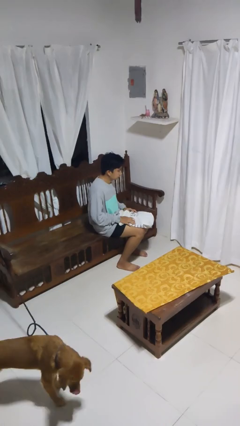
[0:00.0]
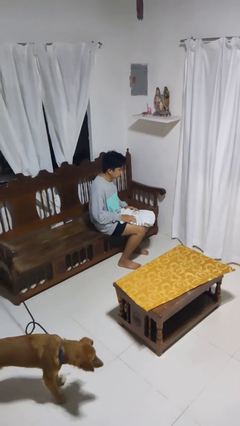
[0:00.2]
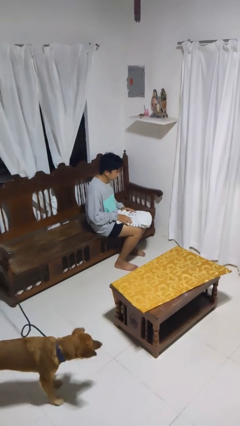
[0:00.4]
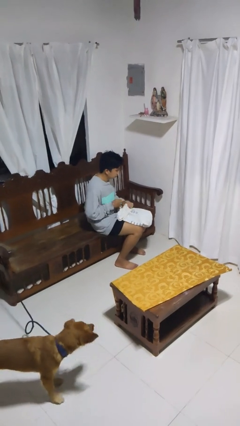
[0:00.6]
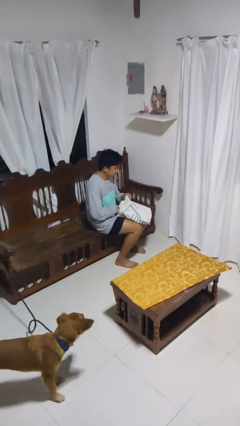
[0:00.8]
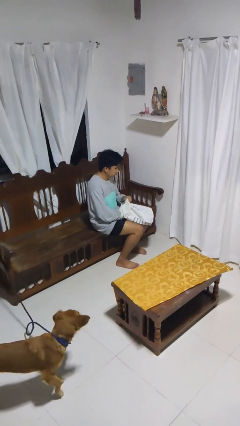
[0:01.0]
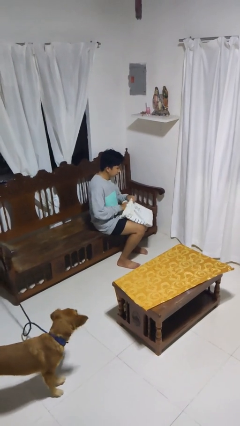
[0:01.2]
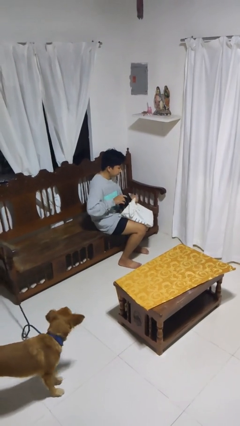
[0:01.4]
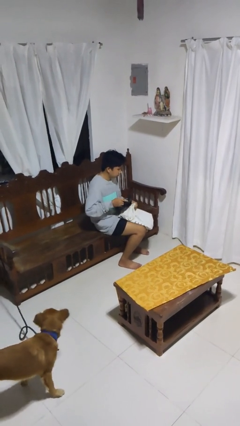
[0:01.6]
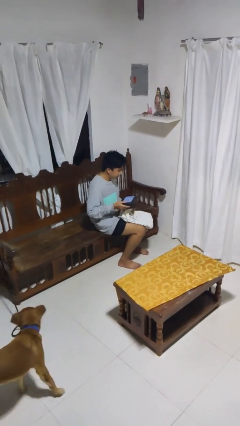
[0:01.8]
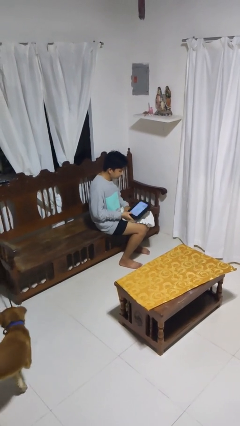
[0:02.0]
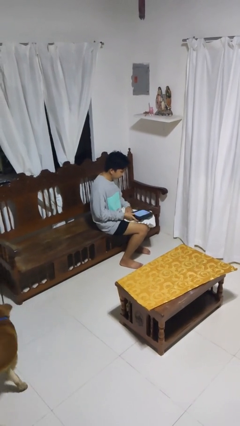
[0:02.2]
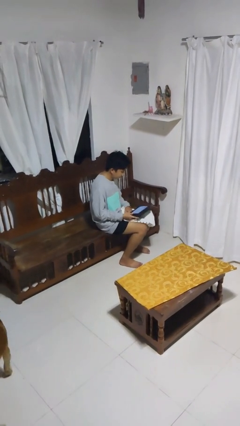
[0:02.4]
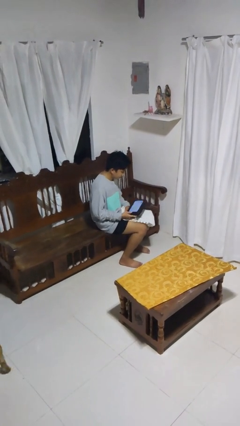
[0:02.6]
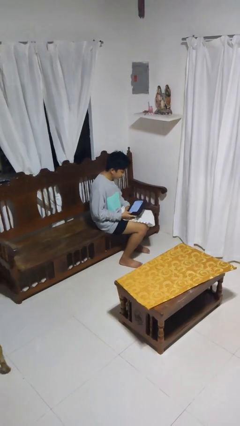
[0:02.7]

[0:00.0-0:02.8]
person takes object from bag

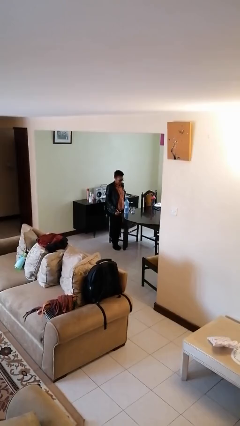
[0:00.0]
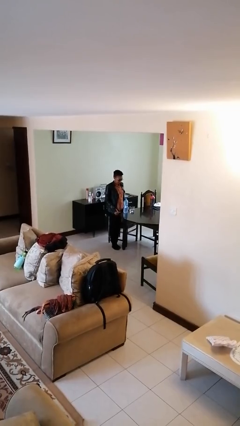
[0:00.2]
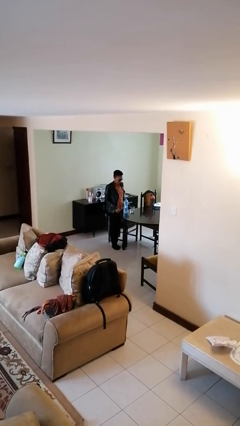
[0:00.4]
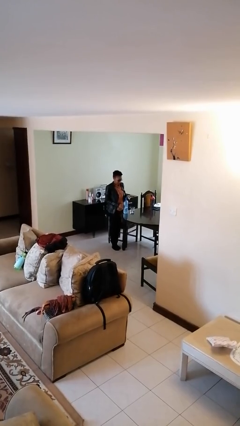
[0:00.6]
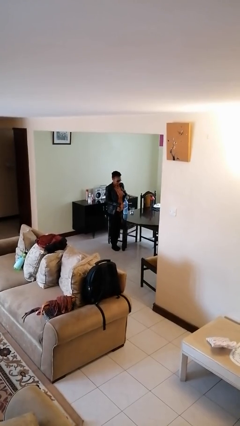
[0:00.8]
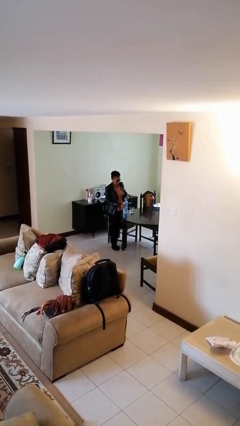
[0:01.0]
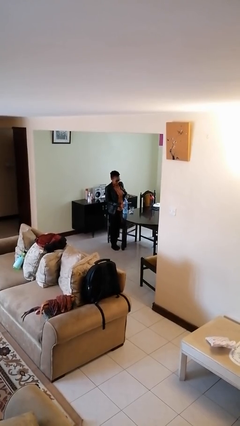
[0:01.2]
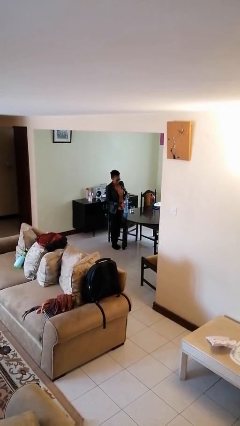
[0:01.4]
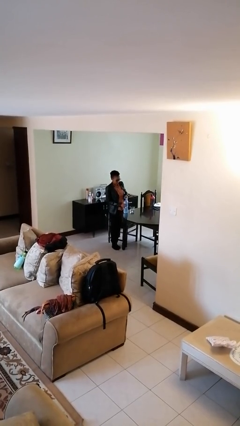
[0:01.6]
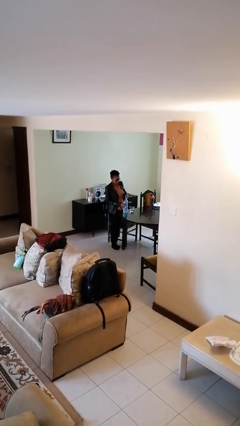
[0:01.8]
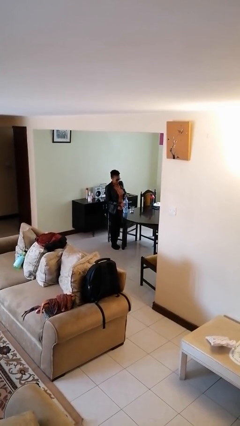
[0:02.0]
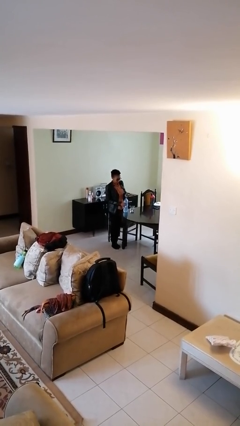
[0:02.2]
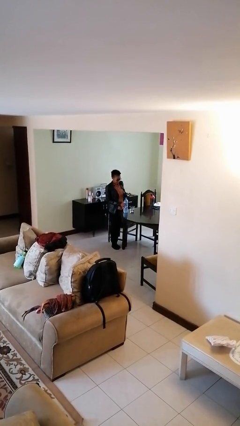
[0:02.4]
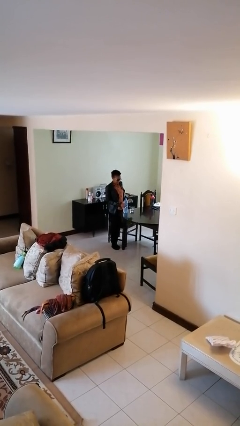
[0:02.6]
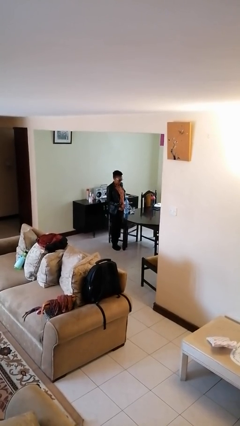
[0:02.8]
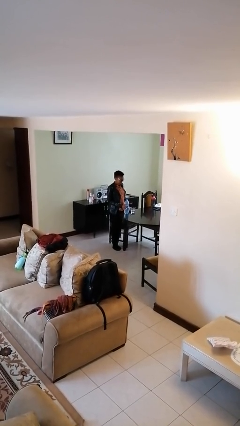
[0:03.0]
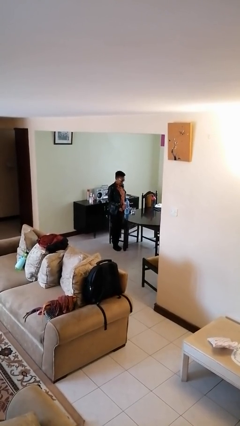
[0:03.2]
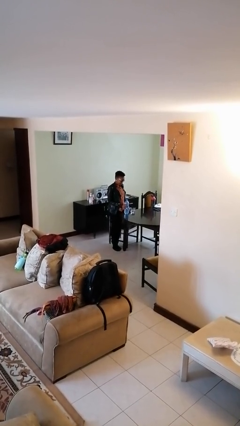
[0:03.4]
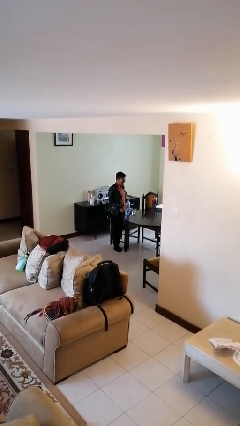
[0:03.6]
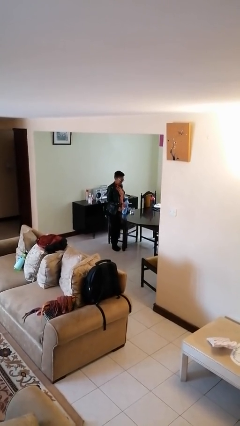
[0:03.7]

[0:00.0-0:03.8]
person unscrews lid from bottle

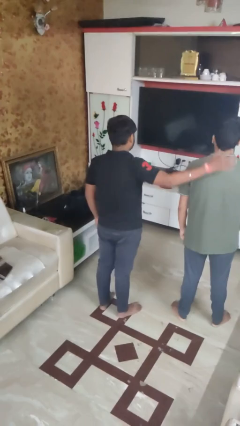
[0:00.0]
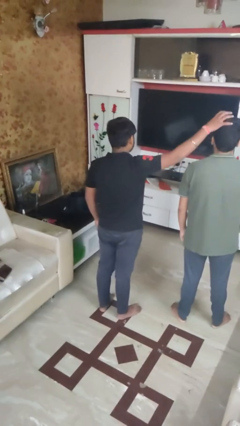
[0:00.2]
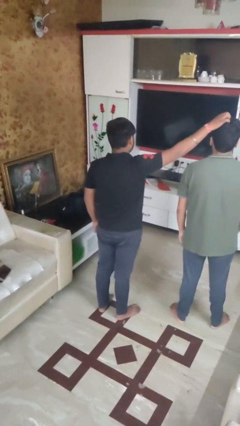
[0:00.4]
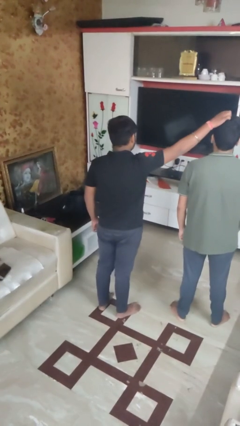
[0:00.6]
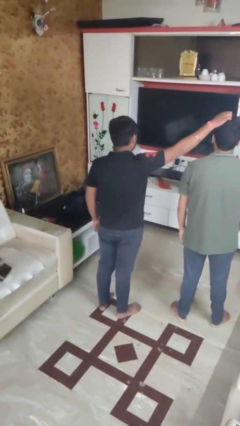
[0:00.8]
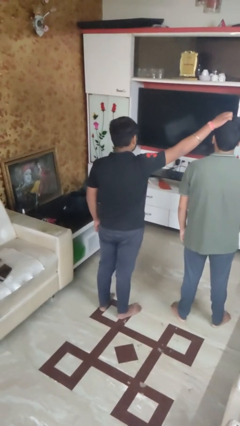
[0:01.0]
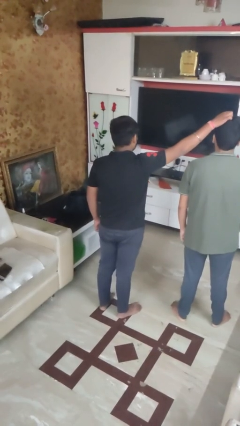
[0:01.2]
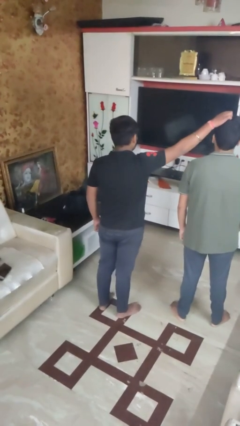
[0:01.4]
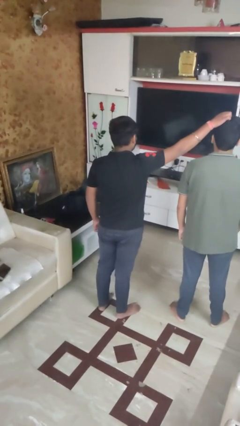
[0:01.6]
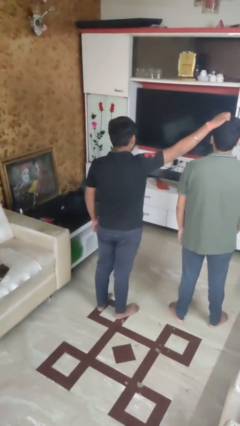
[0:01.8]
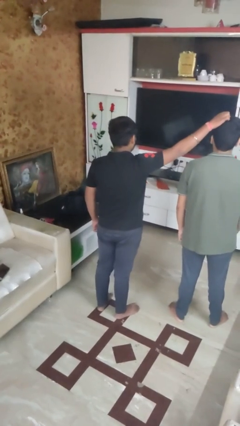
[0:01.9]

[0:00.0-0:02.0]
person grabs person by hair

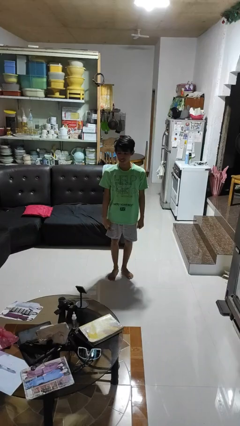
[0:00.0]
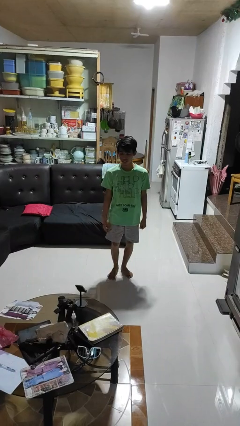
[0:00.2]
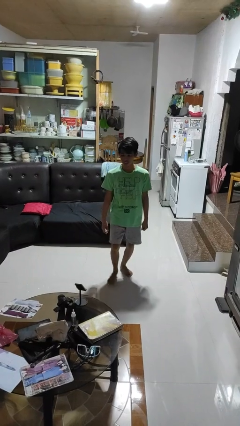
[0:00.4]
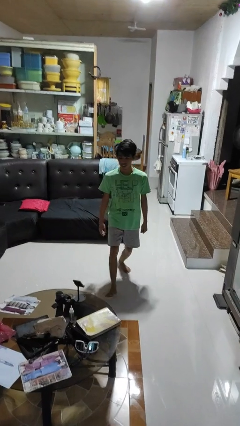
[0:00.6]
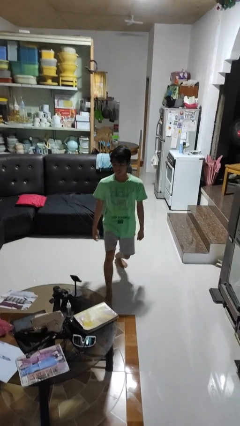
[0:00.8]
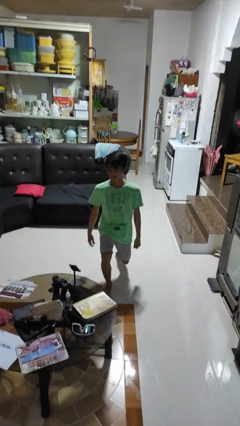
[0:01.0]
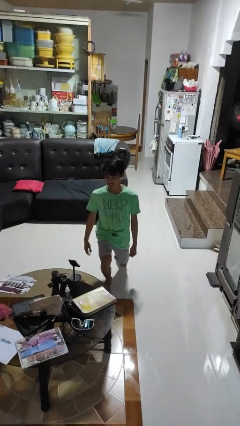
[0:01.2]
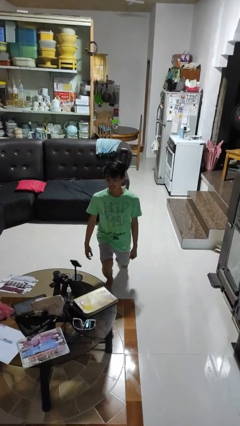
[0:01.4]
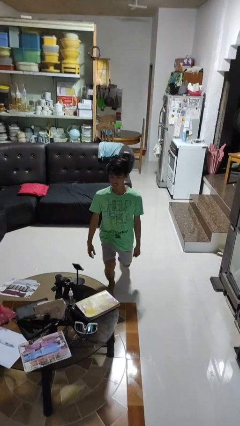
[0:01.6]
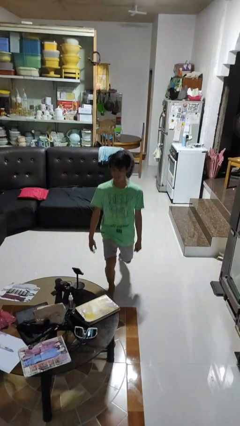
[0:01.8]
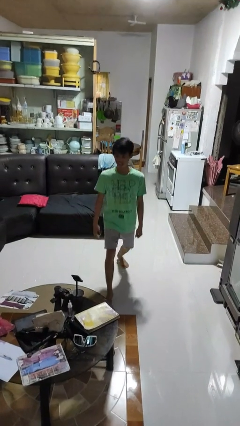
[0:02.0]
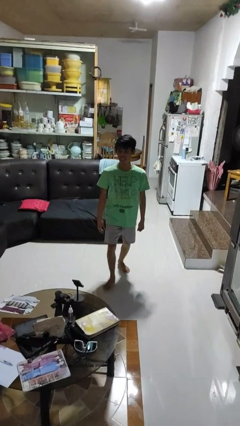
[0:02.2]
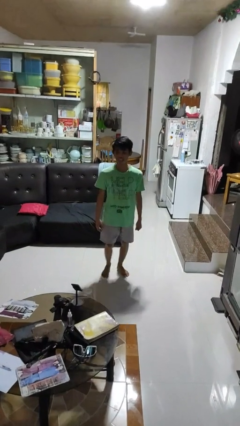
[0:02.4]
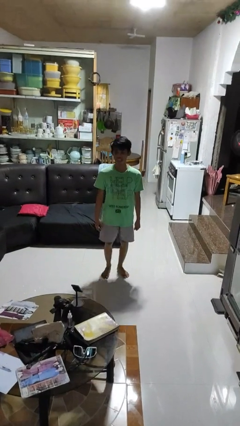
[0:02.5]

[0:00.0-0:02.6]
person exercises with lunges

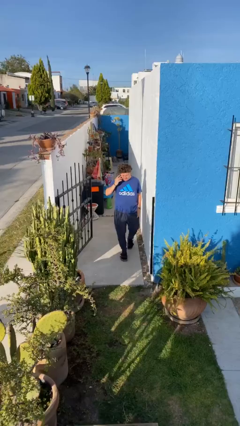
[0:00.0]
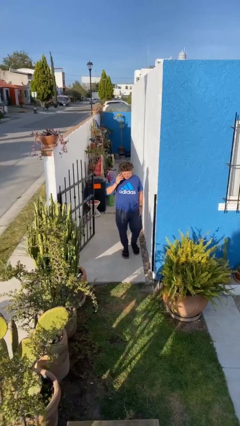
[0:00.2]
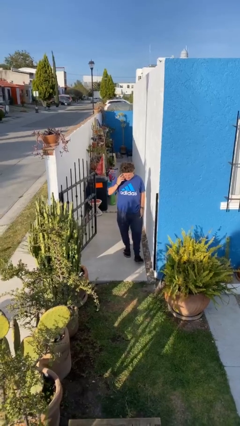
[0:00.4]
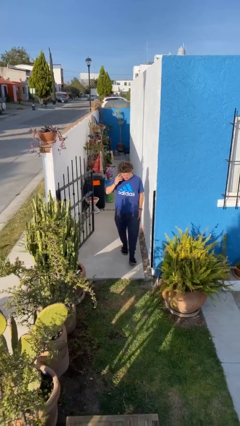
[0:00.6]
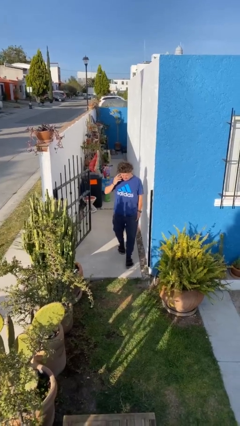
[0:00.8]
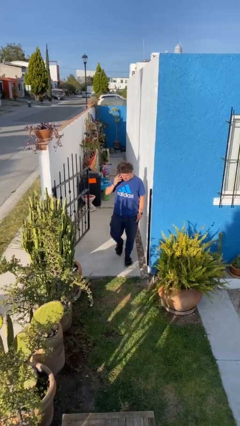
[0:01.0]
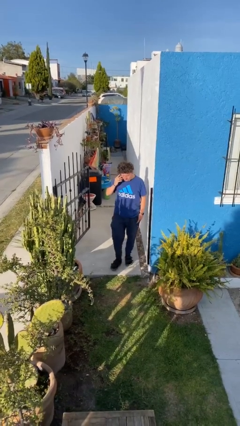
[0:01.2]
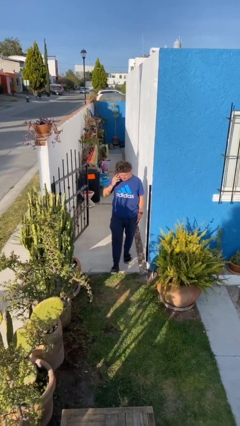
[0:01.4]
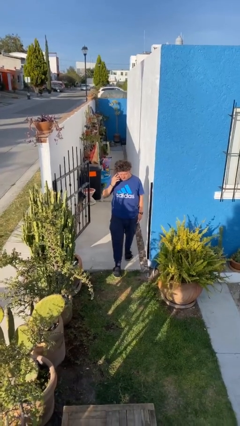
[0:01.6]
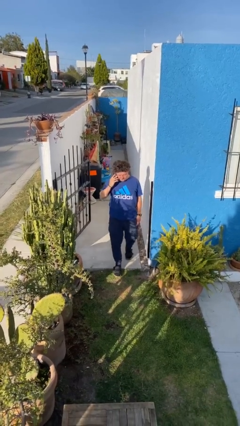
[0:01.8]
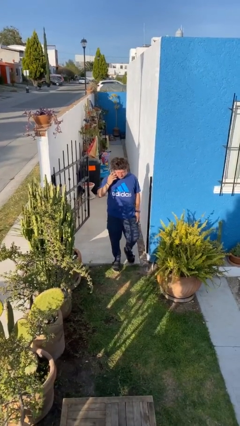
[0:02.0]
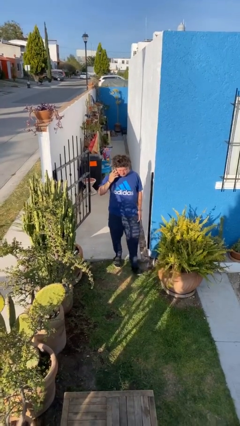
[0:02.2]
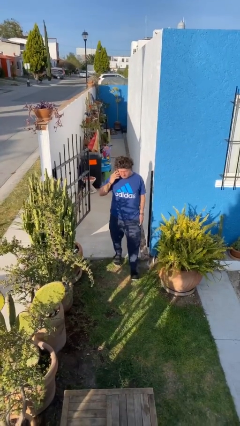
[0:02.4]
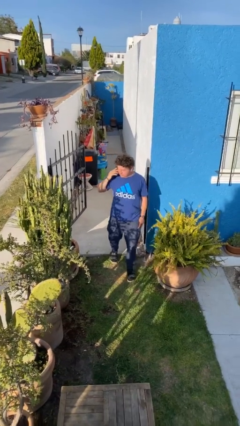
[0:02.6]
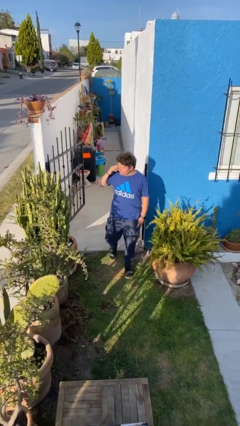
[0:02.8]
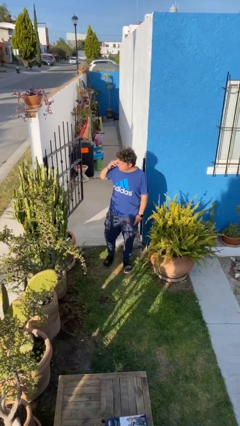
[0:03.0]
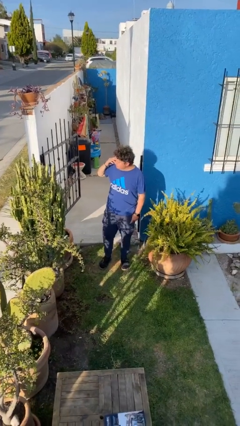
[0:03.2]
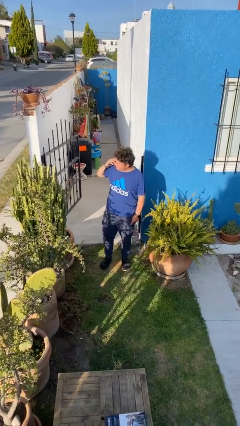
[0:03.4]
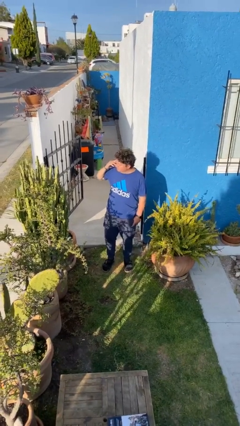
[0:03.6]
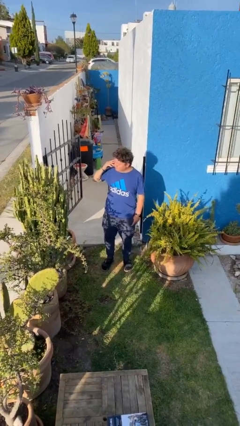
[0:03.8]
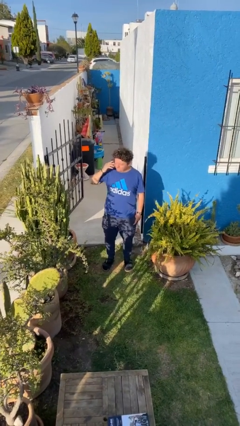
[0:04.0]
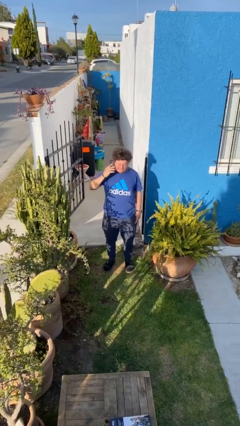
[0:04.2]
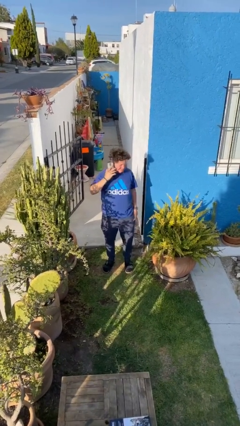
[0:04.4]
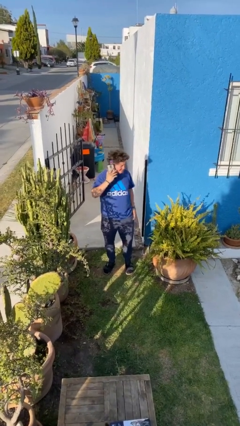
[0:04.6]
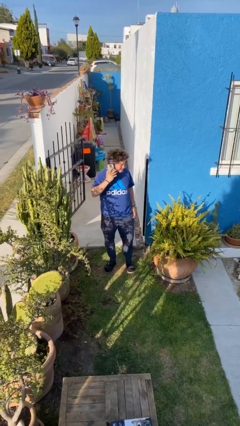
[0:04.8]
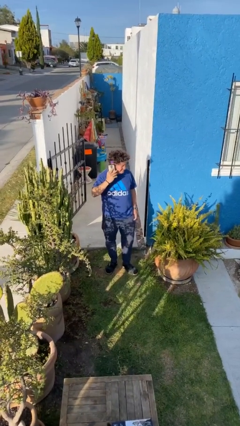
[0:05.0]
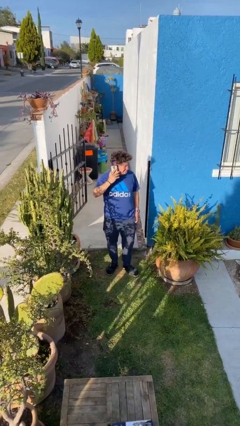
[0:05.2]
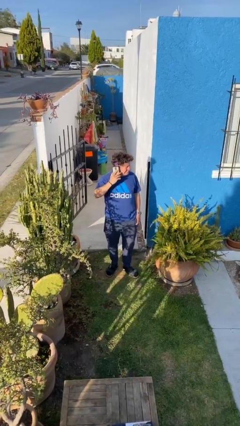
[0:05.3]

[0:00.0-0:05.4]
person enters scene through structure

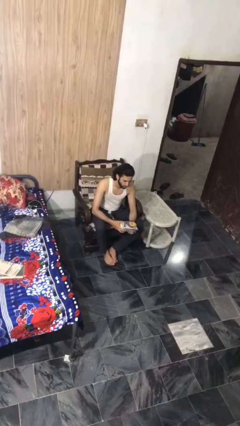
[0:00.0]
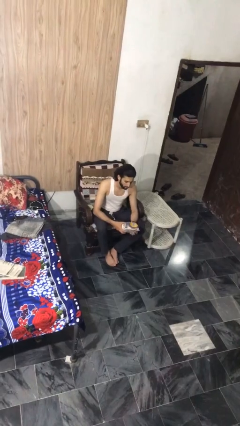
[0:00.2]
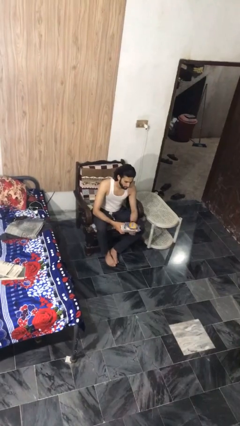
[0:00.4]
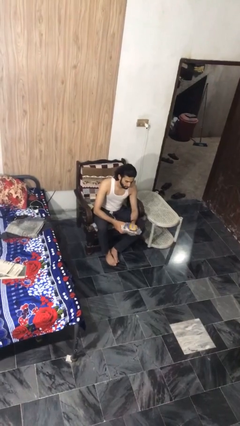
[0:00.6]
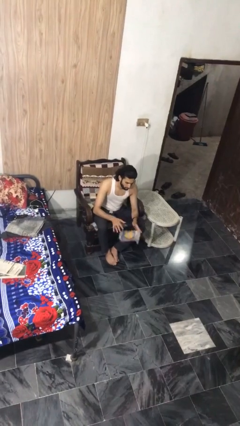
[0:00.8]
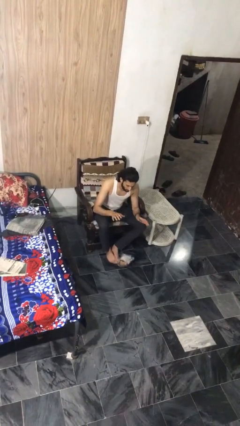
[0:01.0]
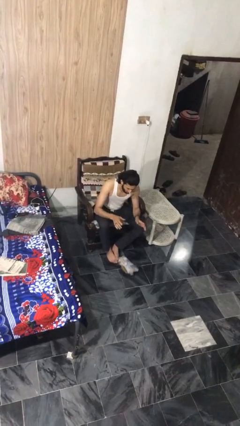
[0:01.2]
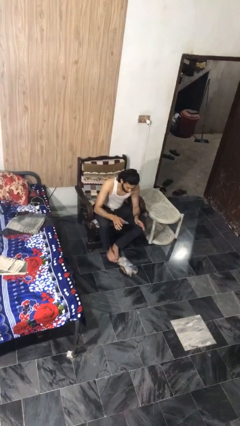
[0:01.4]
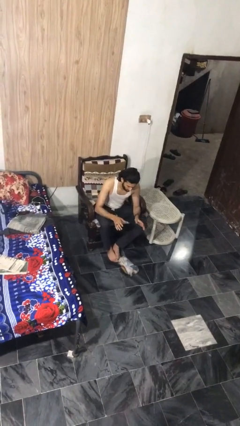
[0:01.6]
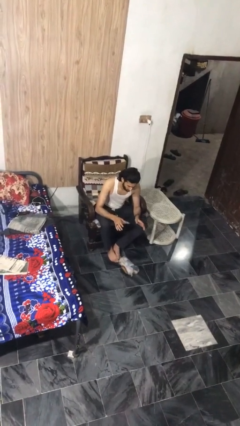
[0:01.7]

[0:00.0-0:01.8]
person drops object
